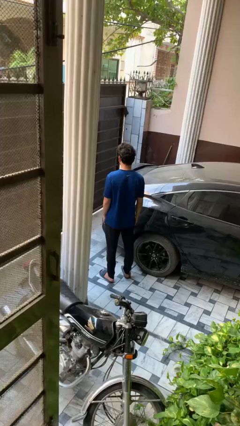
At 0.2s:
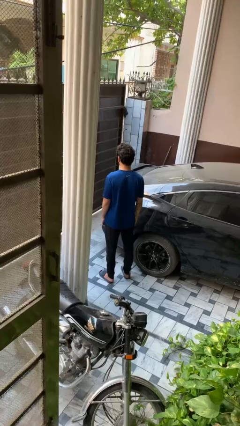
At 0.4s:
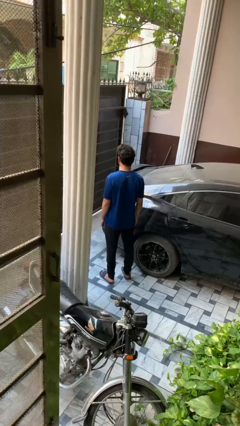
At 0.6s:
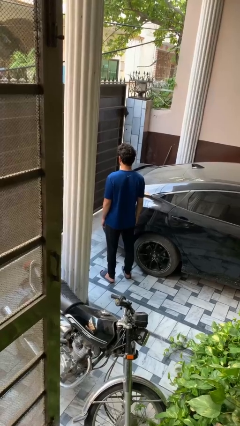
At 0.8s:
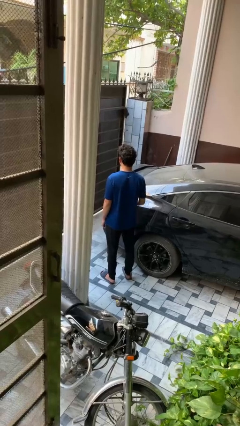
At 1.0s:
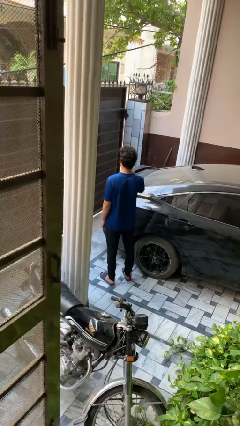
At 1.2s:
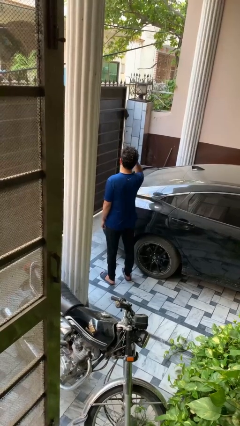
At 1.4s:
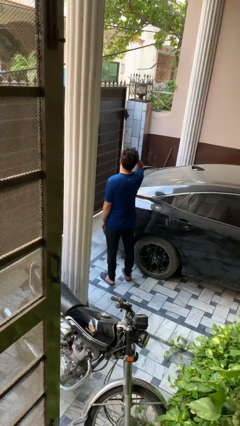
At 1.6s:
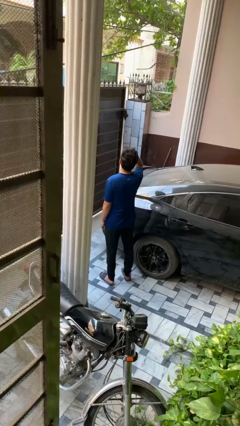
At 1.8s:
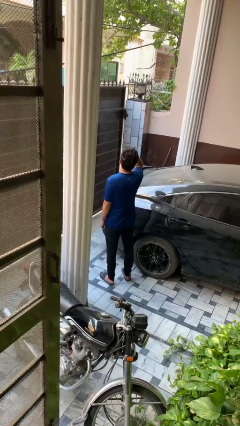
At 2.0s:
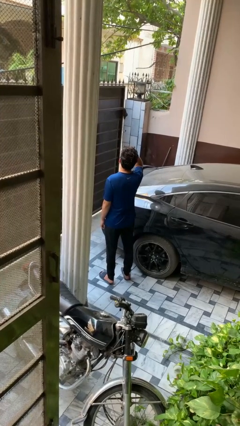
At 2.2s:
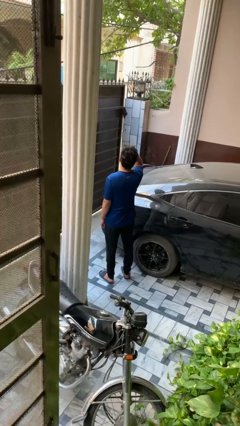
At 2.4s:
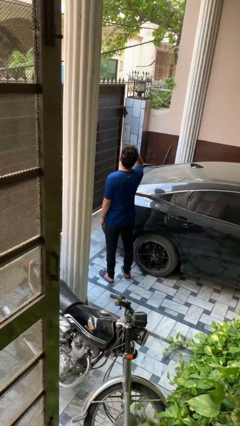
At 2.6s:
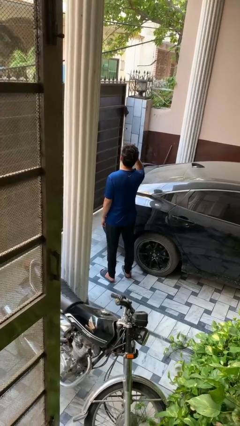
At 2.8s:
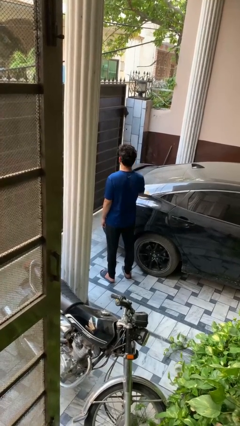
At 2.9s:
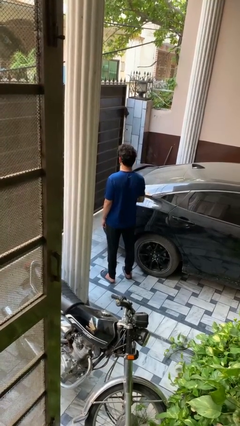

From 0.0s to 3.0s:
person shades eyes

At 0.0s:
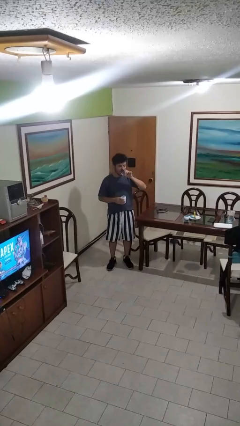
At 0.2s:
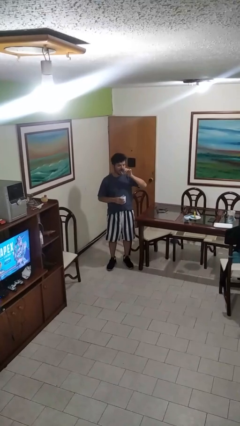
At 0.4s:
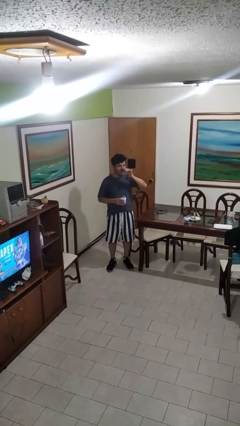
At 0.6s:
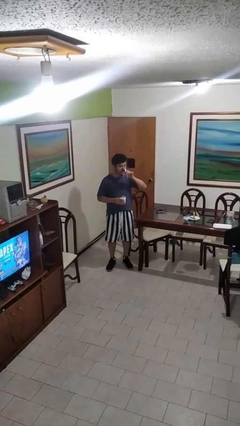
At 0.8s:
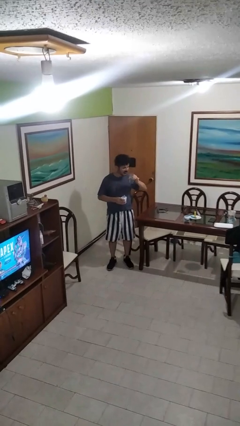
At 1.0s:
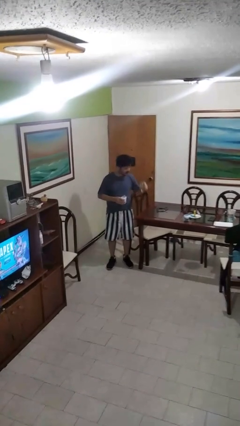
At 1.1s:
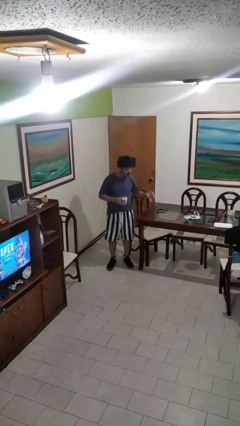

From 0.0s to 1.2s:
person drinks from cup

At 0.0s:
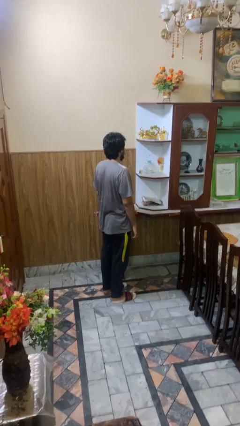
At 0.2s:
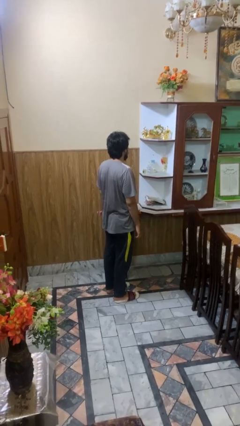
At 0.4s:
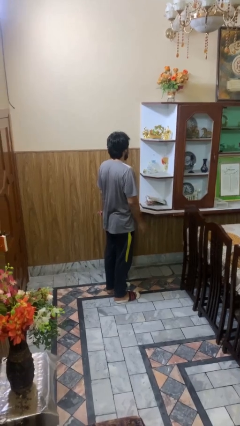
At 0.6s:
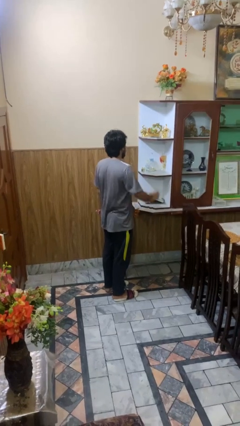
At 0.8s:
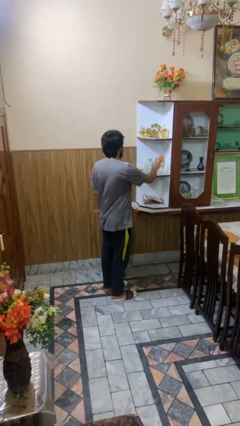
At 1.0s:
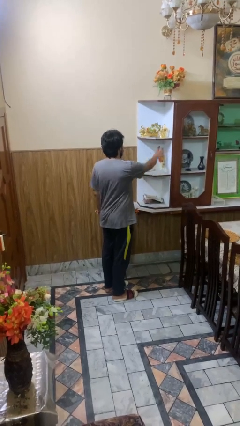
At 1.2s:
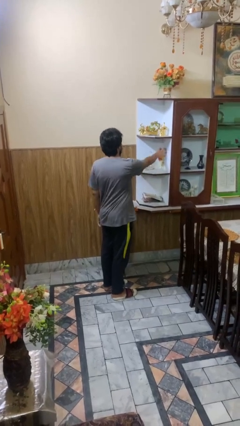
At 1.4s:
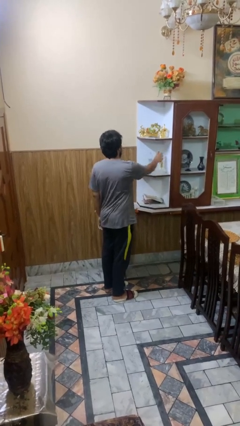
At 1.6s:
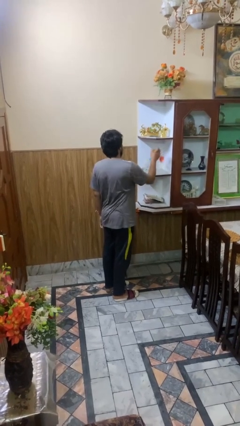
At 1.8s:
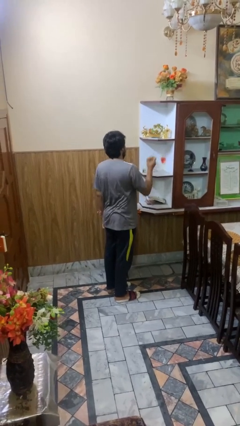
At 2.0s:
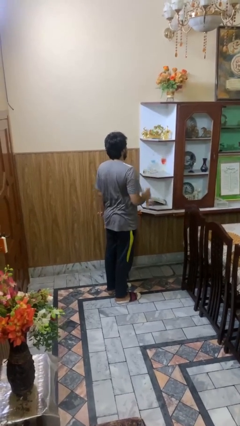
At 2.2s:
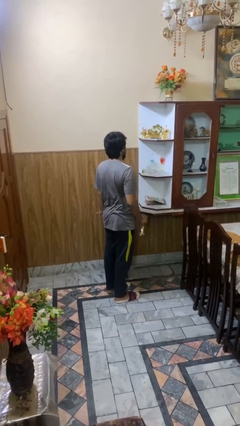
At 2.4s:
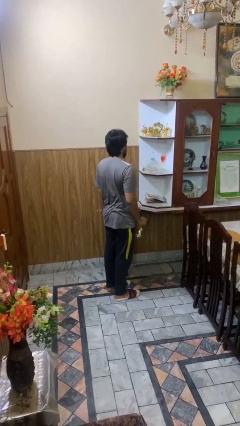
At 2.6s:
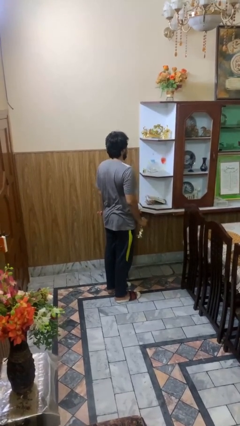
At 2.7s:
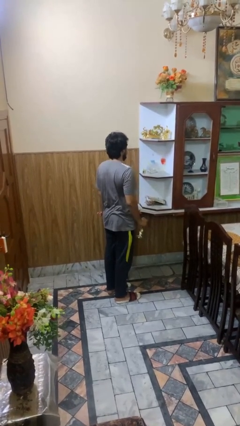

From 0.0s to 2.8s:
person picks up object from cabinet

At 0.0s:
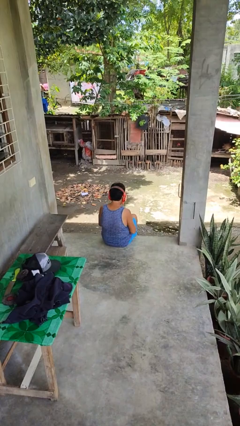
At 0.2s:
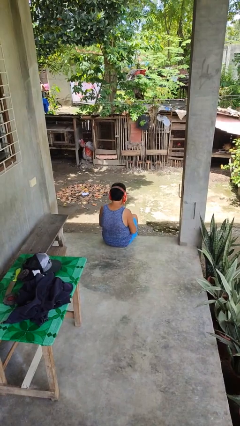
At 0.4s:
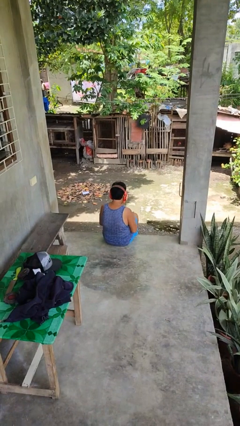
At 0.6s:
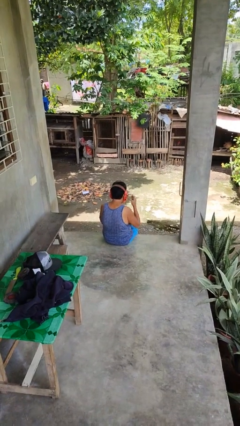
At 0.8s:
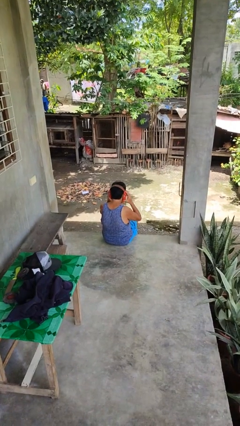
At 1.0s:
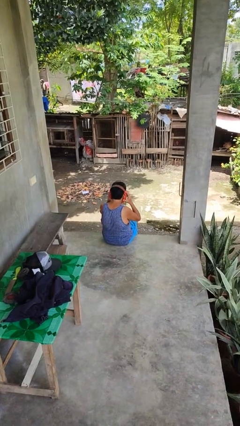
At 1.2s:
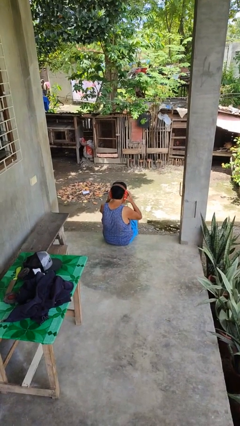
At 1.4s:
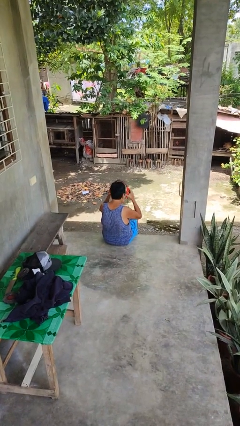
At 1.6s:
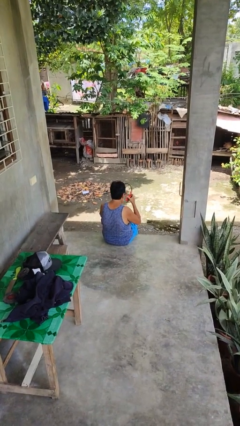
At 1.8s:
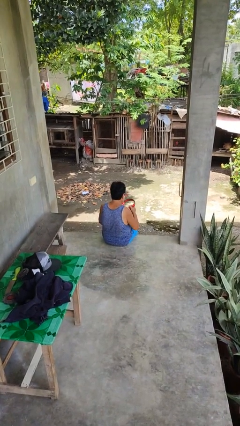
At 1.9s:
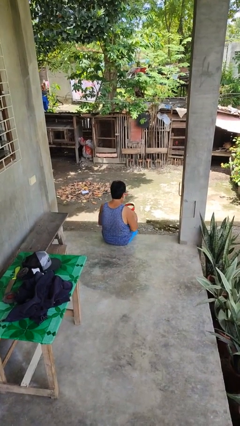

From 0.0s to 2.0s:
person takes off headphones

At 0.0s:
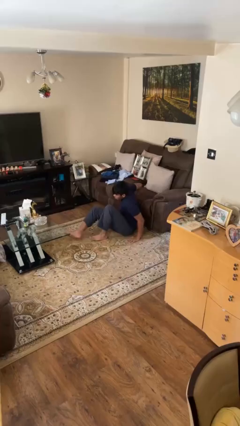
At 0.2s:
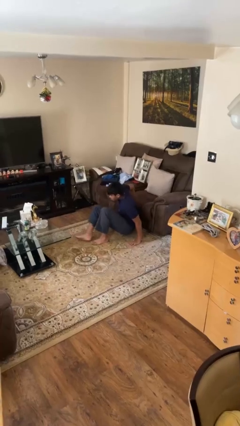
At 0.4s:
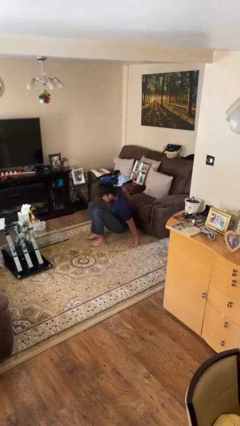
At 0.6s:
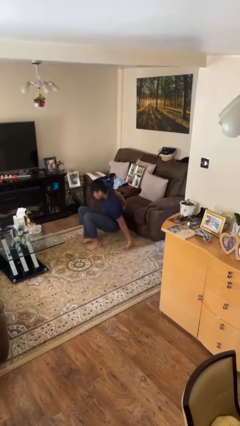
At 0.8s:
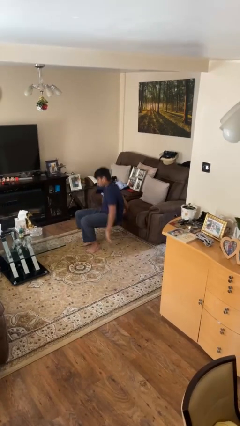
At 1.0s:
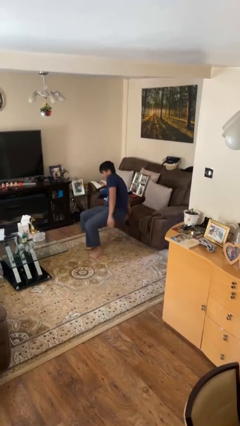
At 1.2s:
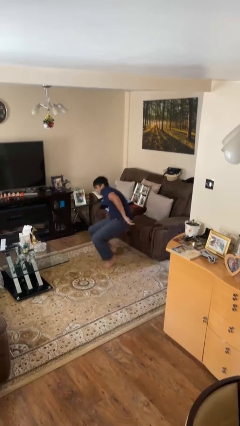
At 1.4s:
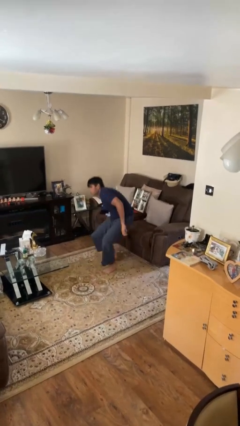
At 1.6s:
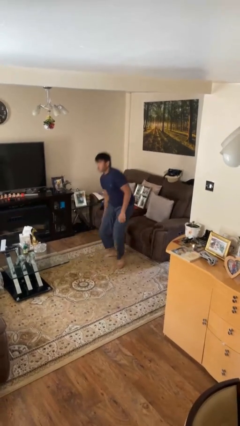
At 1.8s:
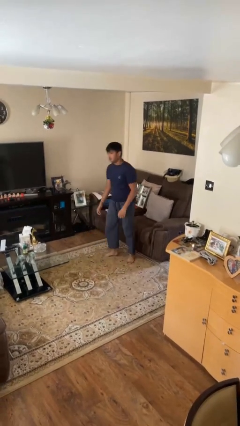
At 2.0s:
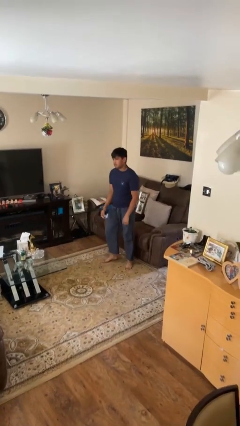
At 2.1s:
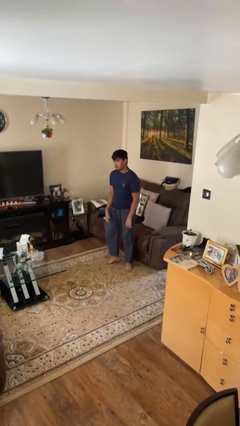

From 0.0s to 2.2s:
person stands up from floor

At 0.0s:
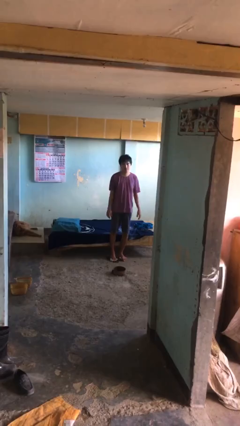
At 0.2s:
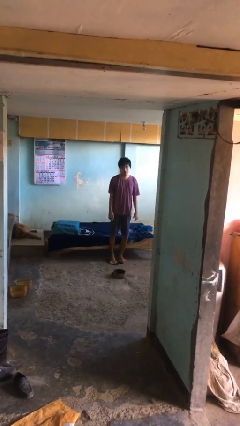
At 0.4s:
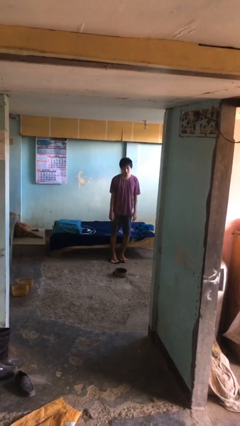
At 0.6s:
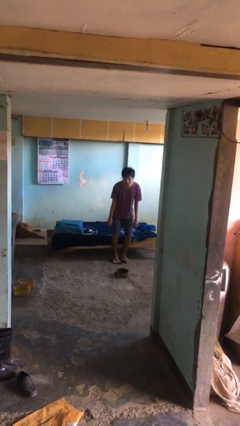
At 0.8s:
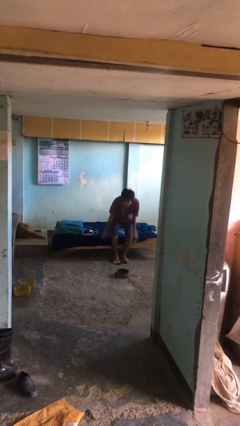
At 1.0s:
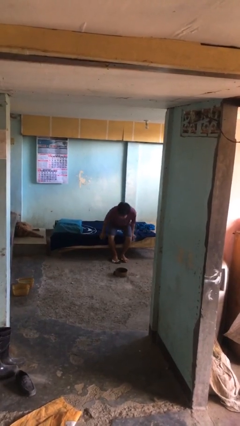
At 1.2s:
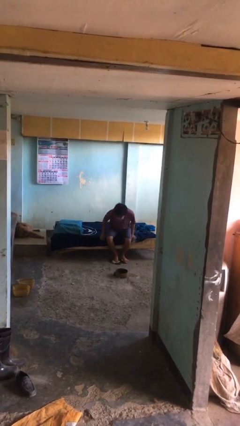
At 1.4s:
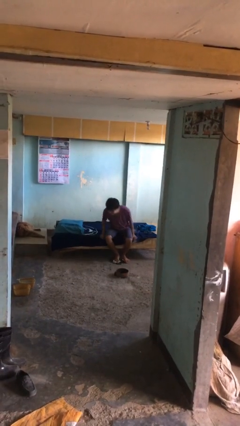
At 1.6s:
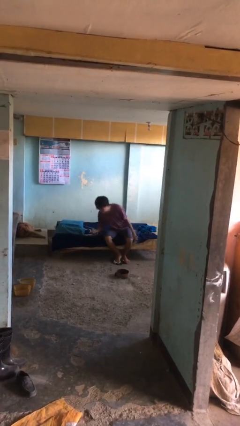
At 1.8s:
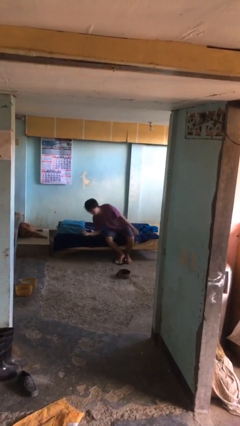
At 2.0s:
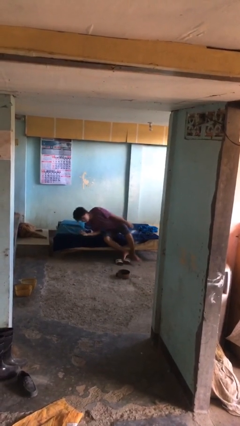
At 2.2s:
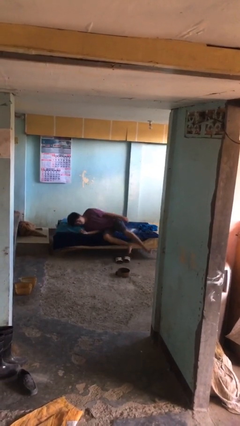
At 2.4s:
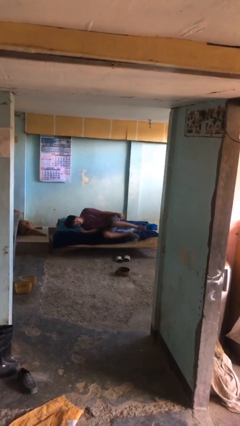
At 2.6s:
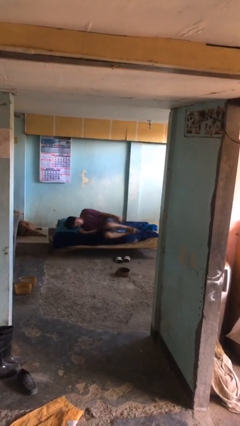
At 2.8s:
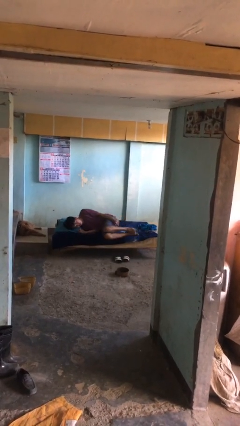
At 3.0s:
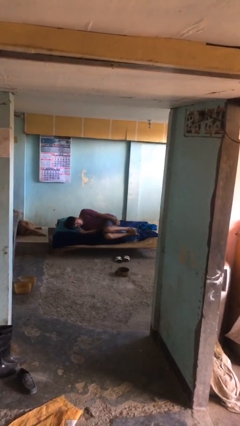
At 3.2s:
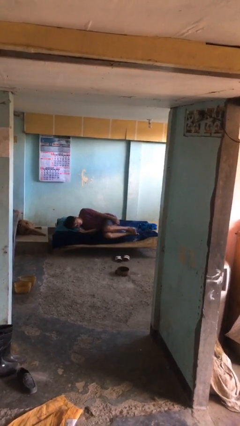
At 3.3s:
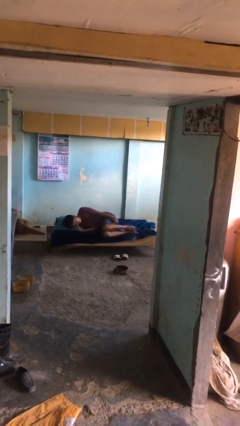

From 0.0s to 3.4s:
person lies down on bed

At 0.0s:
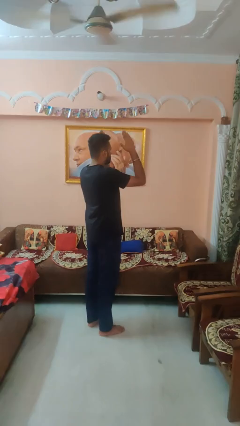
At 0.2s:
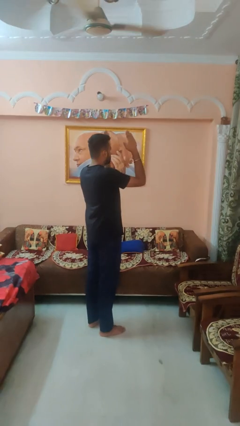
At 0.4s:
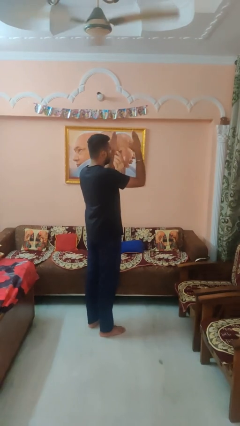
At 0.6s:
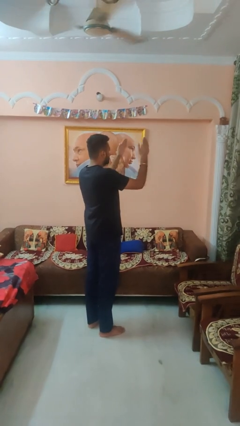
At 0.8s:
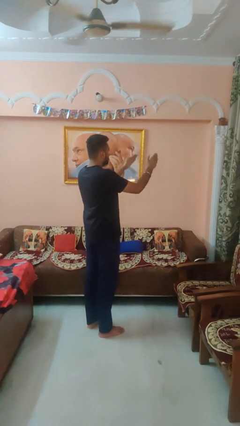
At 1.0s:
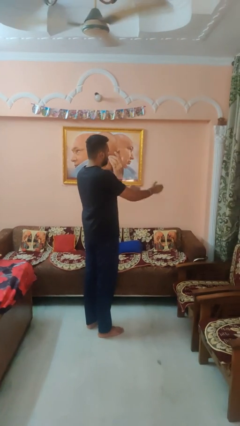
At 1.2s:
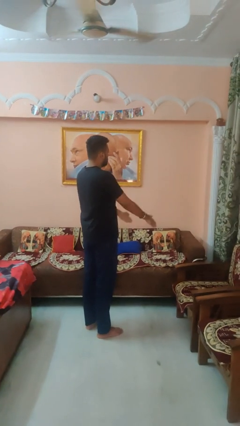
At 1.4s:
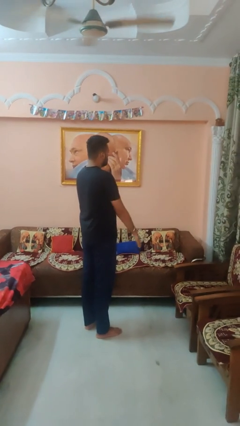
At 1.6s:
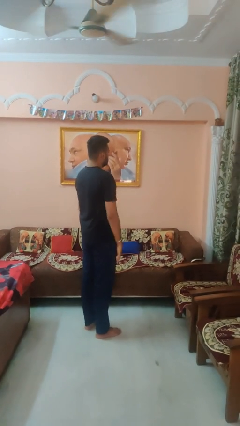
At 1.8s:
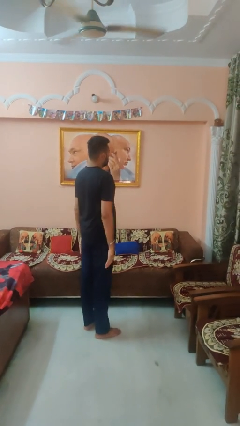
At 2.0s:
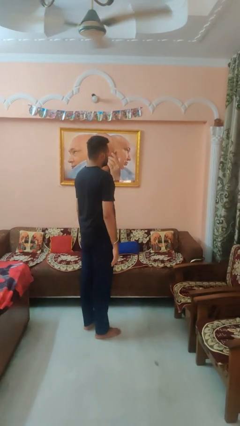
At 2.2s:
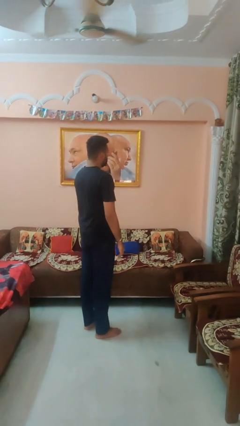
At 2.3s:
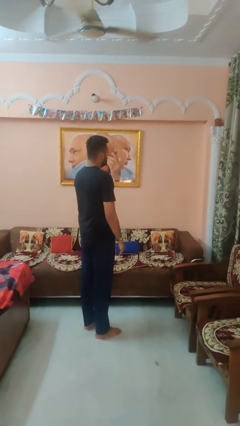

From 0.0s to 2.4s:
person gestures swipe down
